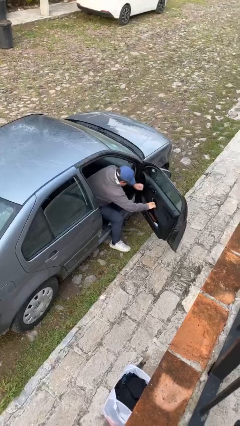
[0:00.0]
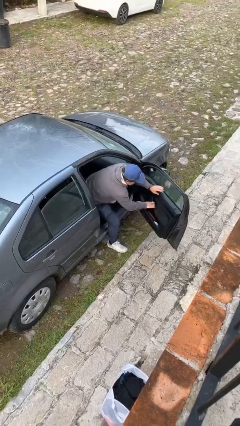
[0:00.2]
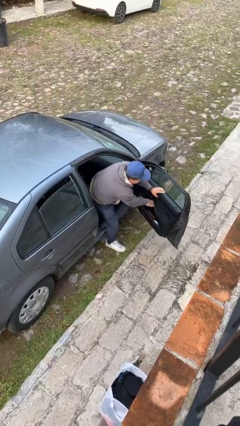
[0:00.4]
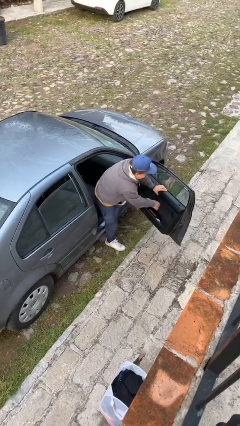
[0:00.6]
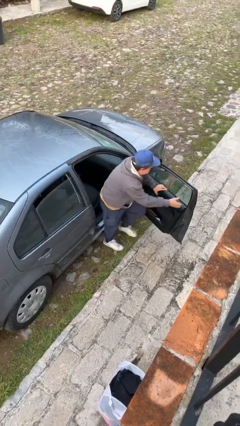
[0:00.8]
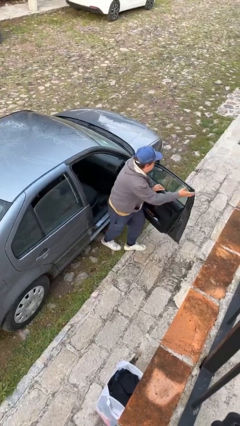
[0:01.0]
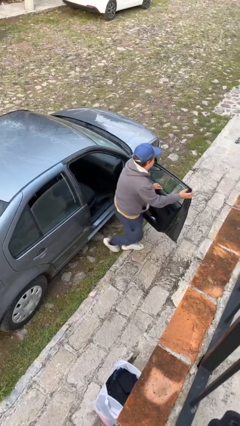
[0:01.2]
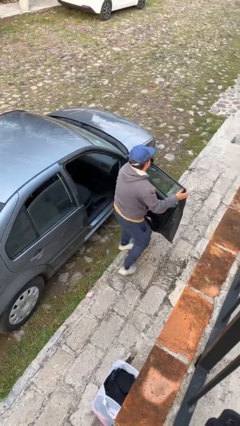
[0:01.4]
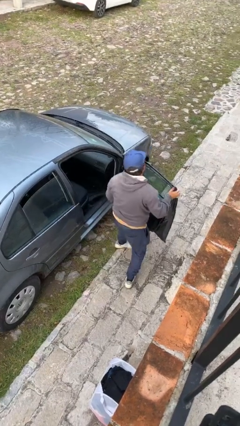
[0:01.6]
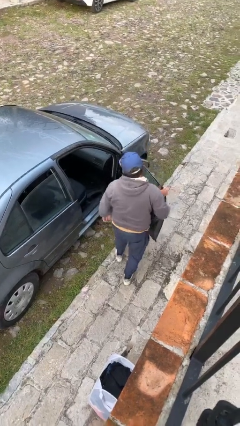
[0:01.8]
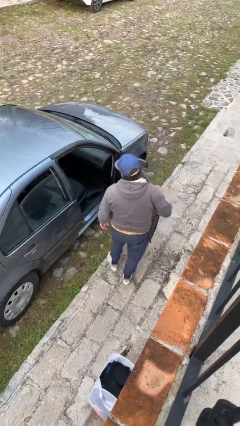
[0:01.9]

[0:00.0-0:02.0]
person exits car

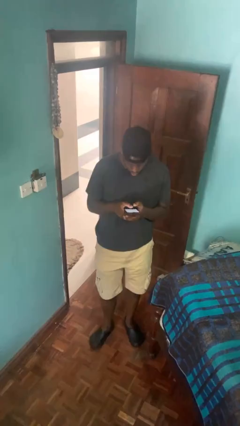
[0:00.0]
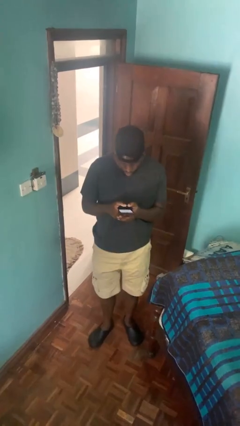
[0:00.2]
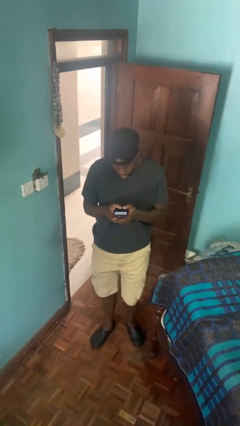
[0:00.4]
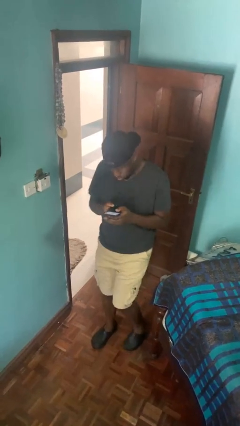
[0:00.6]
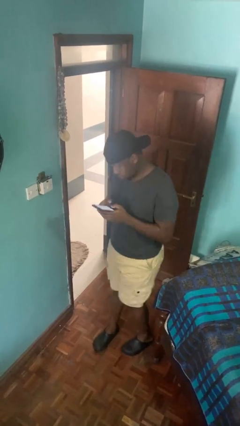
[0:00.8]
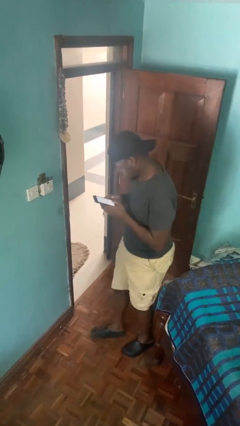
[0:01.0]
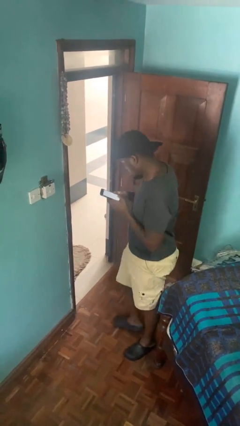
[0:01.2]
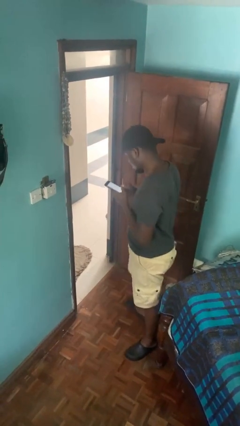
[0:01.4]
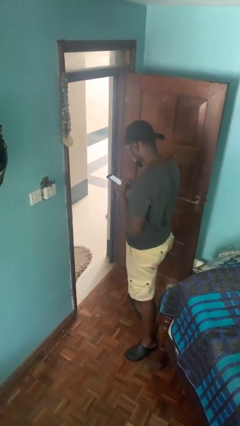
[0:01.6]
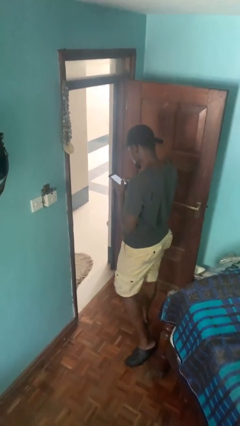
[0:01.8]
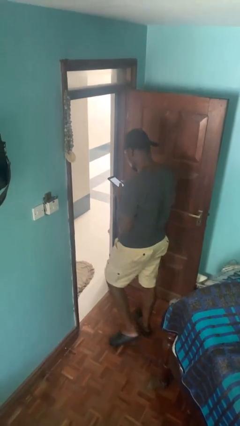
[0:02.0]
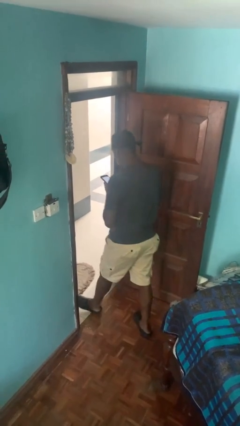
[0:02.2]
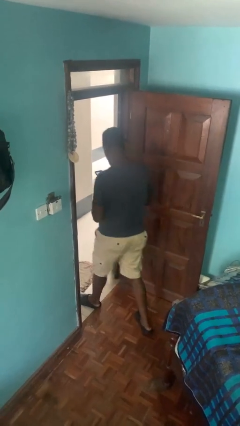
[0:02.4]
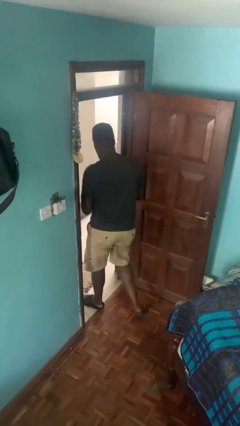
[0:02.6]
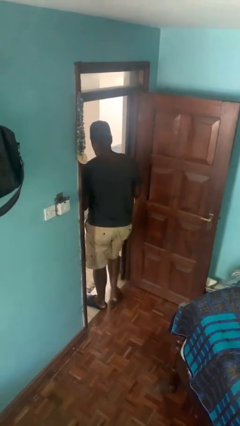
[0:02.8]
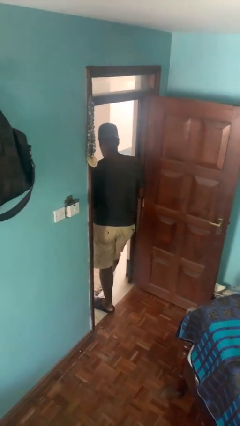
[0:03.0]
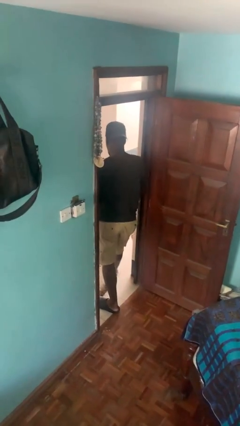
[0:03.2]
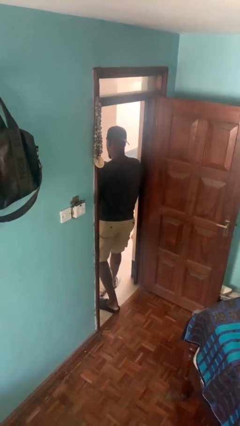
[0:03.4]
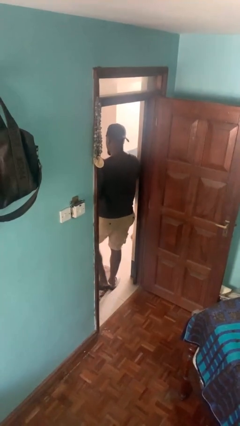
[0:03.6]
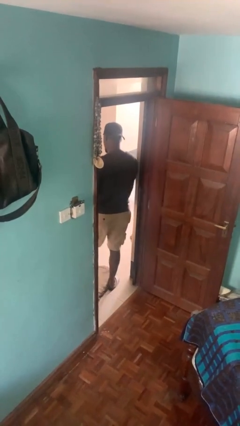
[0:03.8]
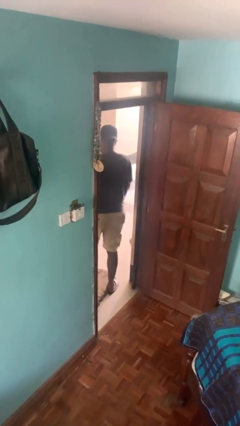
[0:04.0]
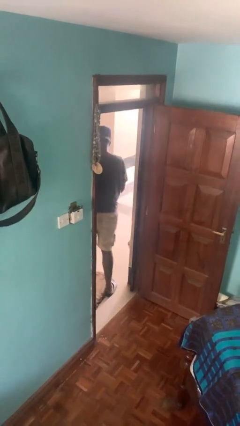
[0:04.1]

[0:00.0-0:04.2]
person exits scene through structure

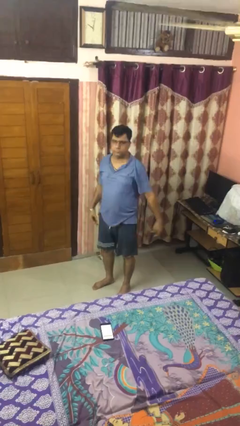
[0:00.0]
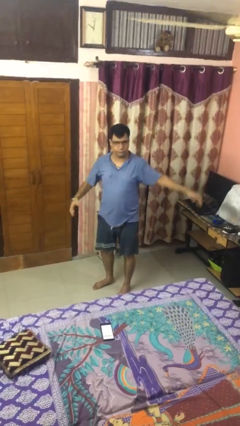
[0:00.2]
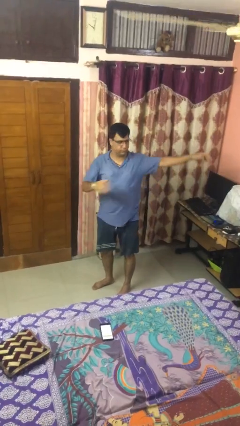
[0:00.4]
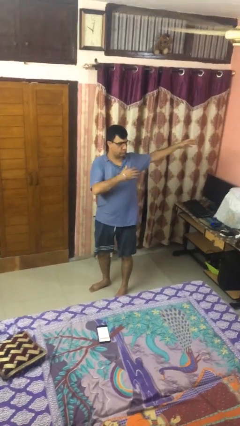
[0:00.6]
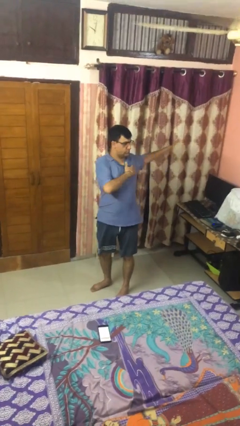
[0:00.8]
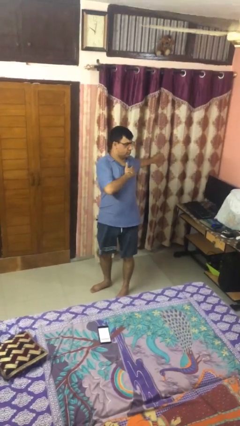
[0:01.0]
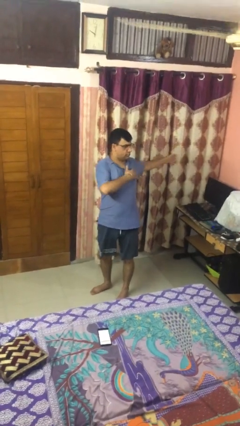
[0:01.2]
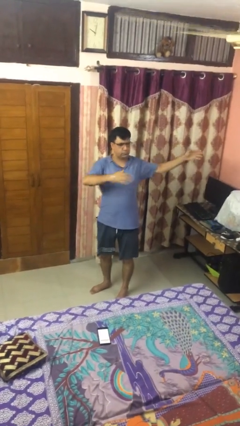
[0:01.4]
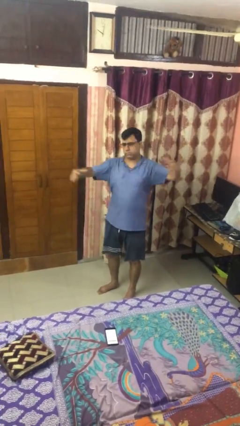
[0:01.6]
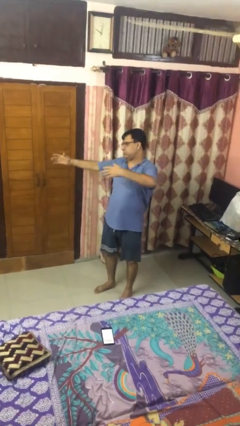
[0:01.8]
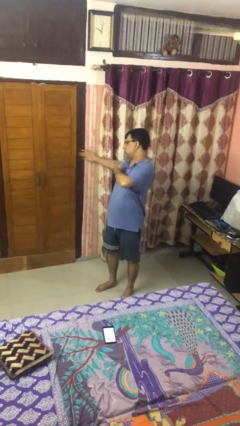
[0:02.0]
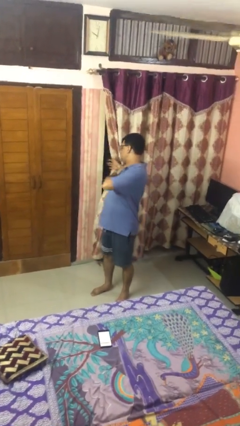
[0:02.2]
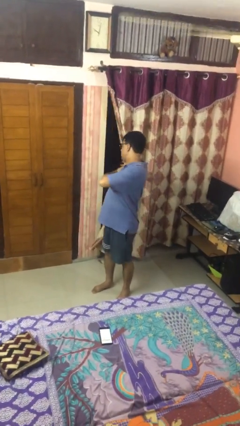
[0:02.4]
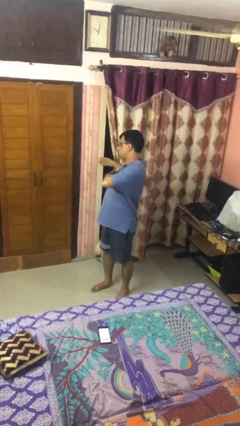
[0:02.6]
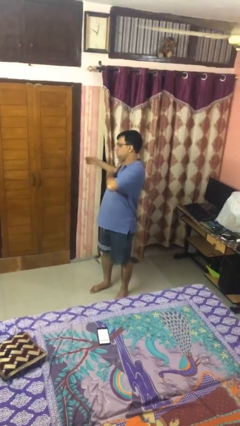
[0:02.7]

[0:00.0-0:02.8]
person stretches arms to side

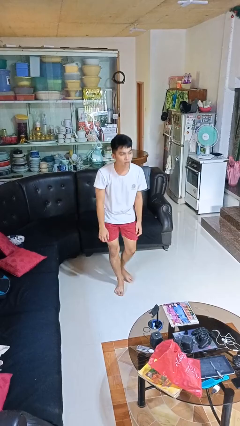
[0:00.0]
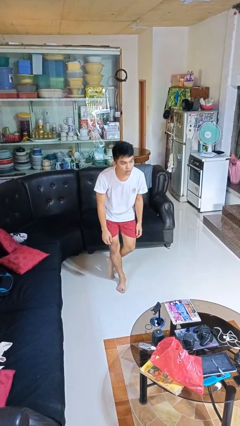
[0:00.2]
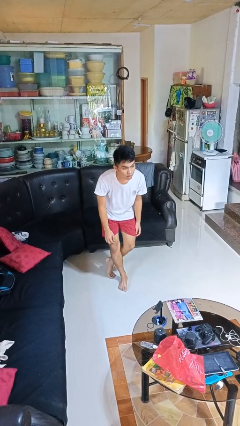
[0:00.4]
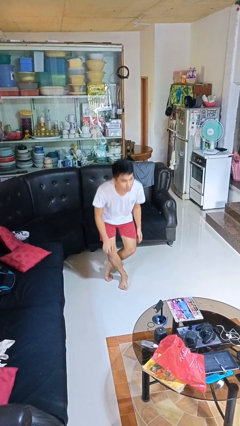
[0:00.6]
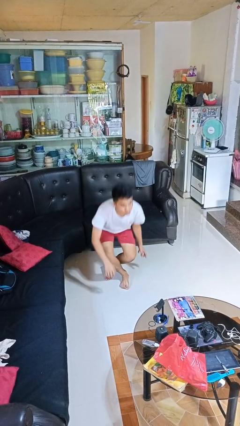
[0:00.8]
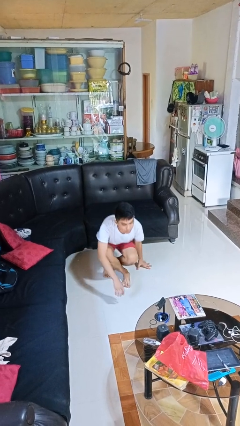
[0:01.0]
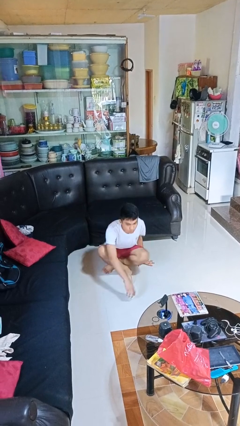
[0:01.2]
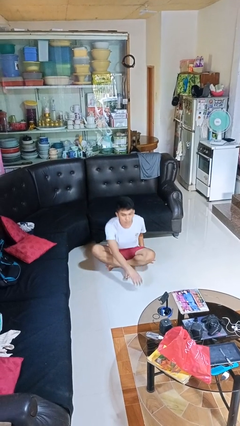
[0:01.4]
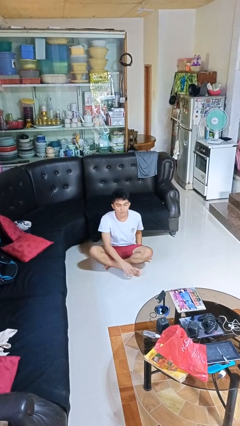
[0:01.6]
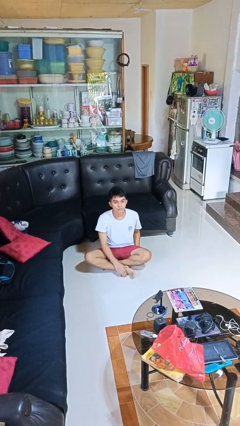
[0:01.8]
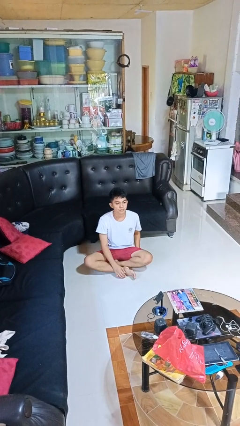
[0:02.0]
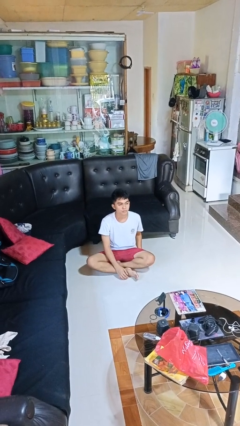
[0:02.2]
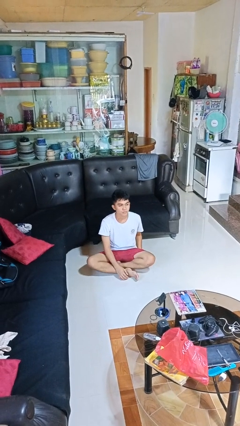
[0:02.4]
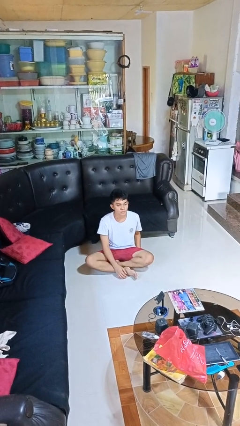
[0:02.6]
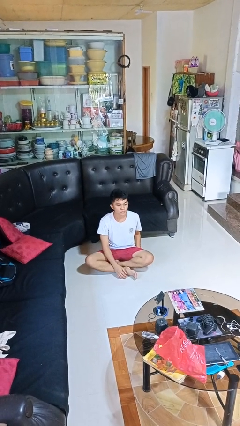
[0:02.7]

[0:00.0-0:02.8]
person sits crisscross

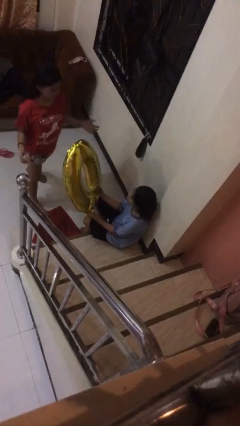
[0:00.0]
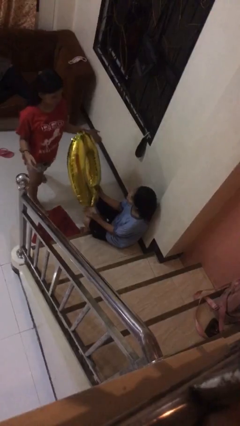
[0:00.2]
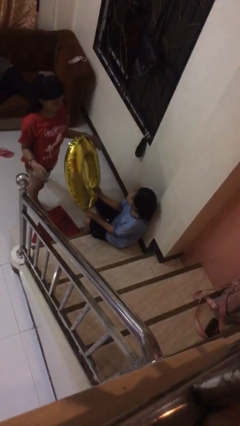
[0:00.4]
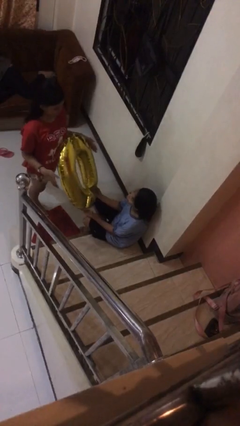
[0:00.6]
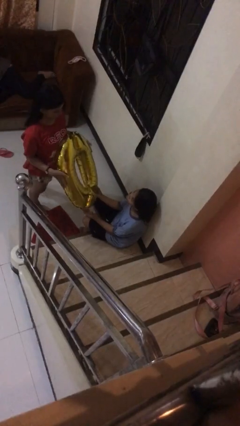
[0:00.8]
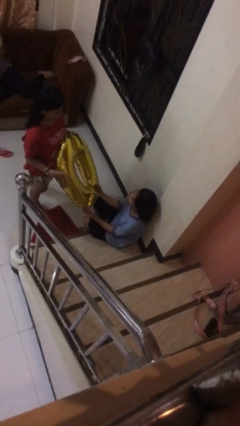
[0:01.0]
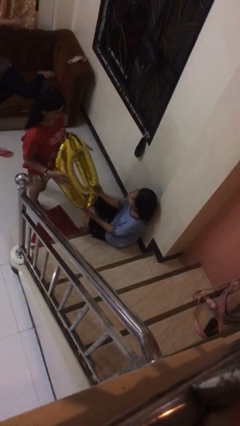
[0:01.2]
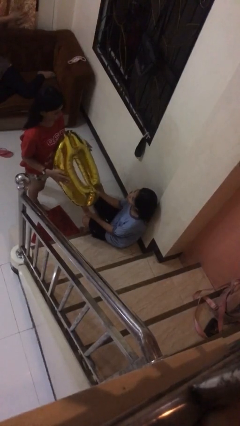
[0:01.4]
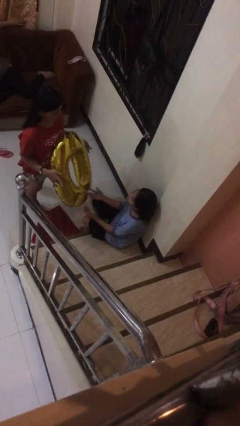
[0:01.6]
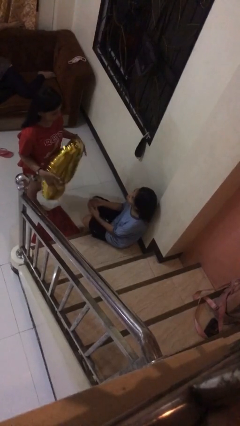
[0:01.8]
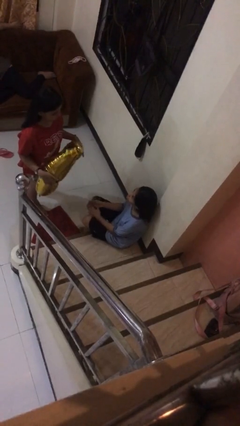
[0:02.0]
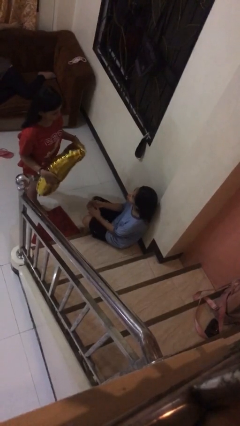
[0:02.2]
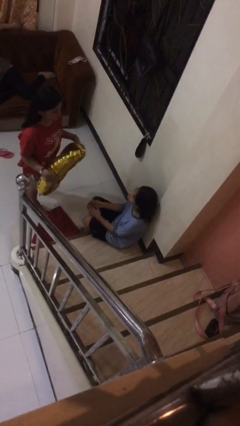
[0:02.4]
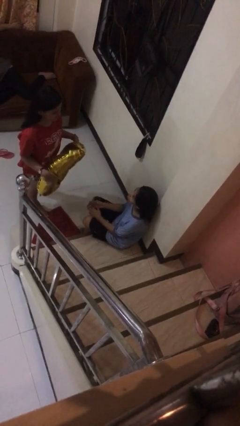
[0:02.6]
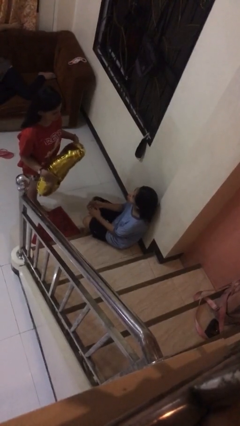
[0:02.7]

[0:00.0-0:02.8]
person transfers object to person

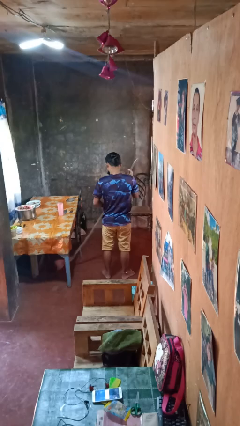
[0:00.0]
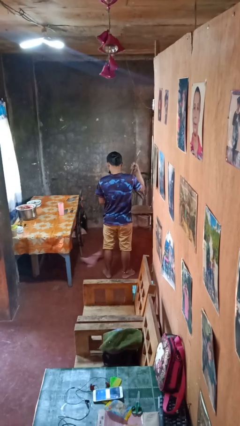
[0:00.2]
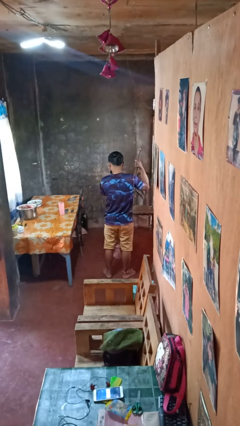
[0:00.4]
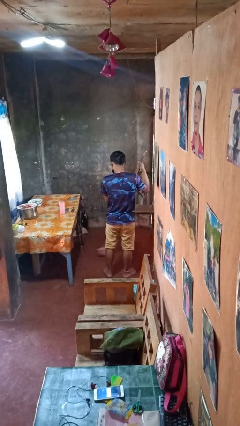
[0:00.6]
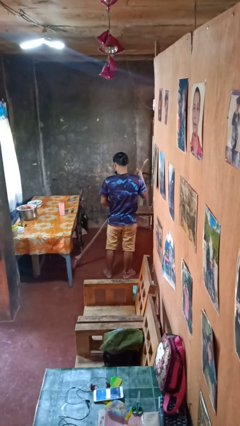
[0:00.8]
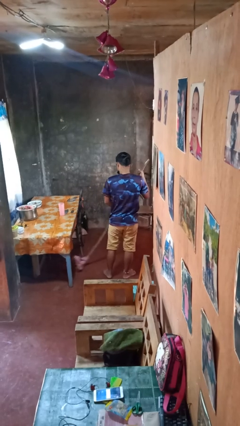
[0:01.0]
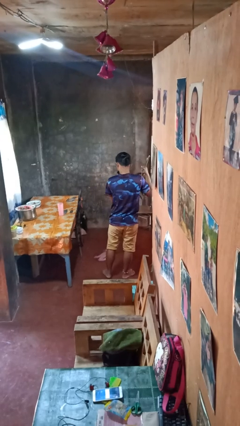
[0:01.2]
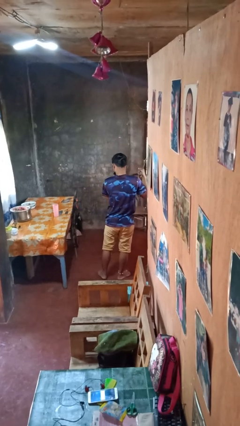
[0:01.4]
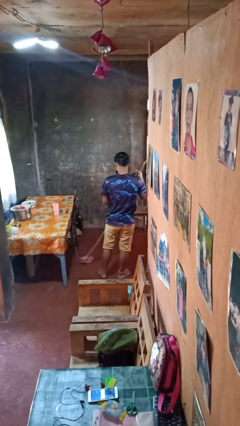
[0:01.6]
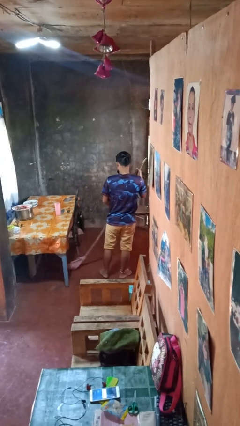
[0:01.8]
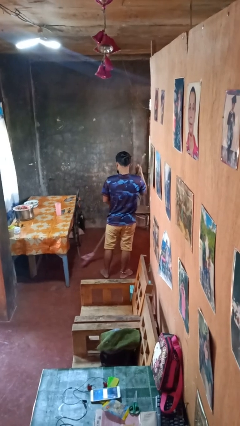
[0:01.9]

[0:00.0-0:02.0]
person mops

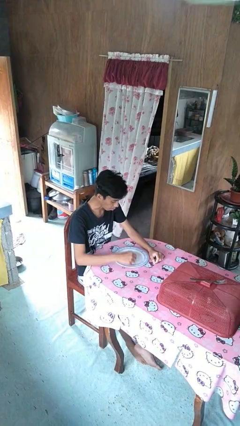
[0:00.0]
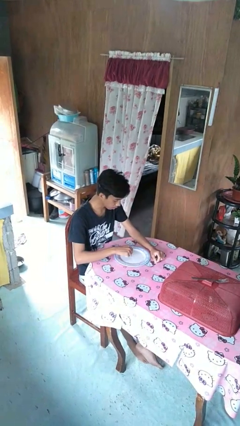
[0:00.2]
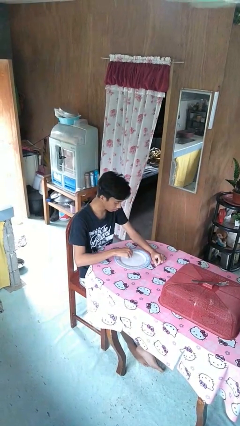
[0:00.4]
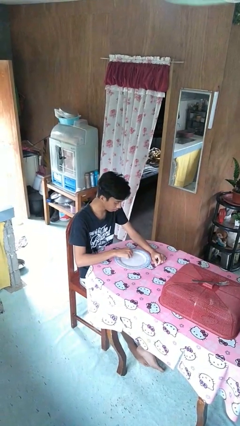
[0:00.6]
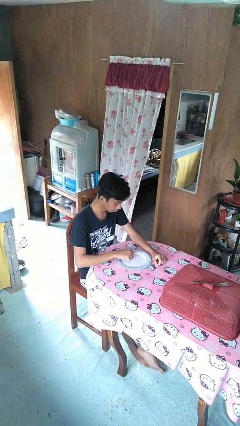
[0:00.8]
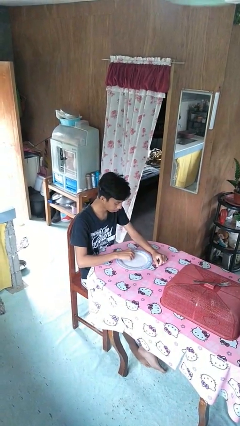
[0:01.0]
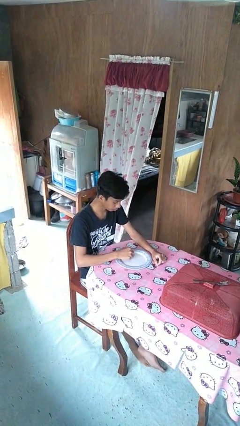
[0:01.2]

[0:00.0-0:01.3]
person eats with hands
